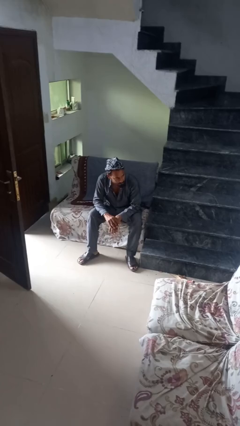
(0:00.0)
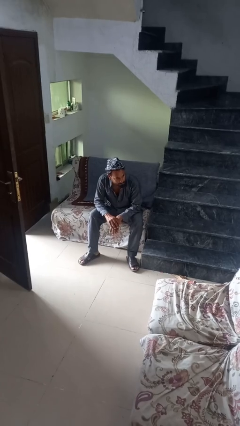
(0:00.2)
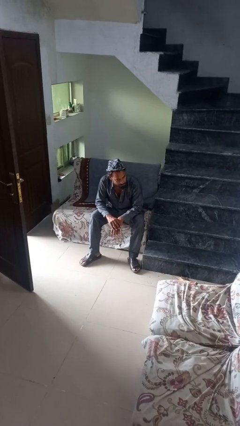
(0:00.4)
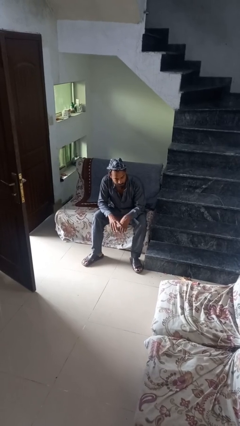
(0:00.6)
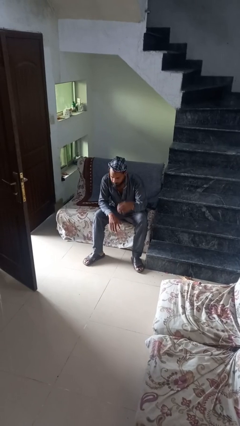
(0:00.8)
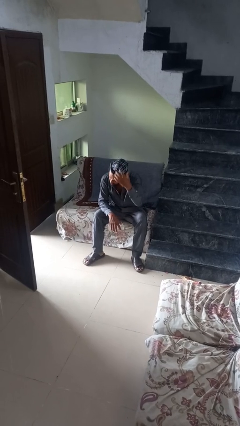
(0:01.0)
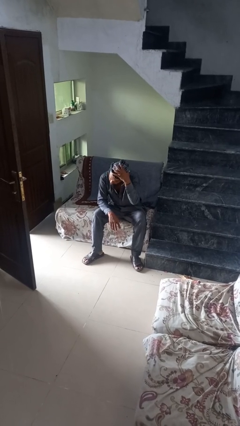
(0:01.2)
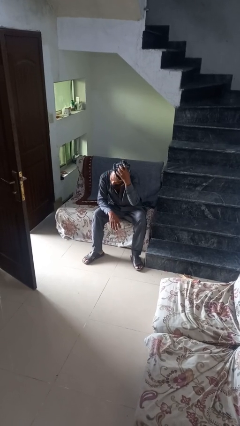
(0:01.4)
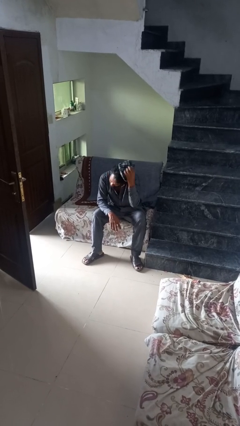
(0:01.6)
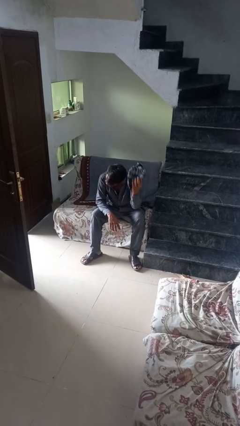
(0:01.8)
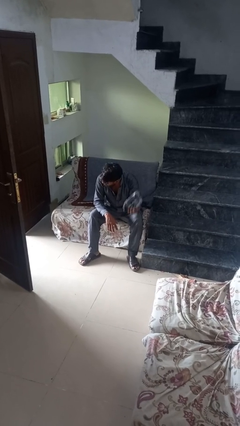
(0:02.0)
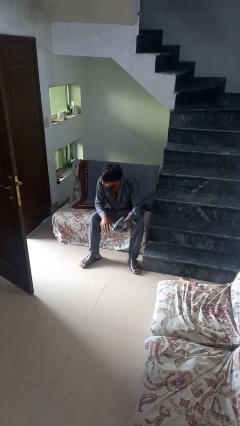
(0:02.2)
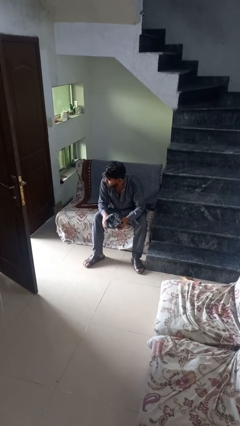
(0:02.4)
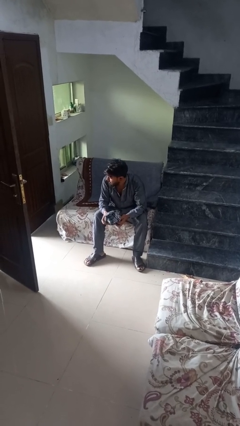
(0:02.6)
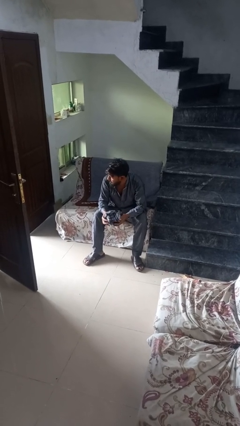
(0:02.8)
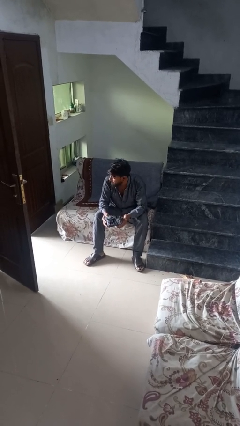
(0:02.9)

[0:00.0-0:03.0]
person takes off hat

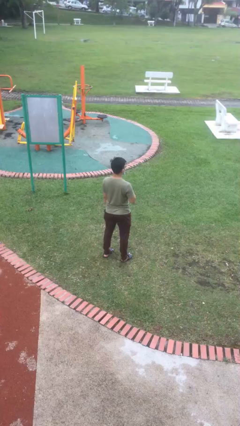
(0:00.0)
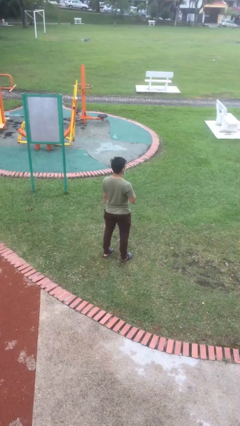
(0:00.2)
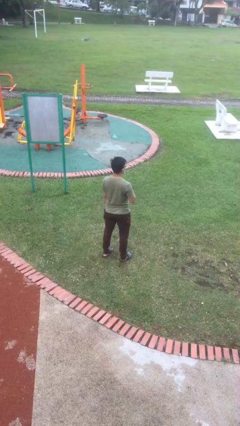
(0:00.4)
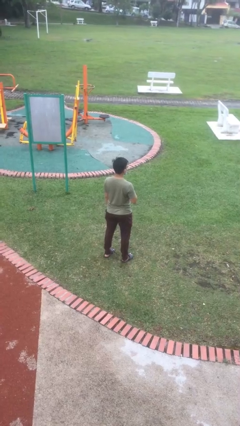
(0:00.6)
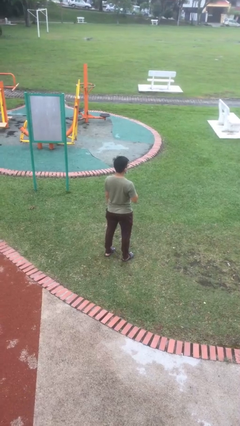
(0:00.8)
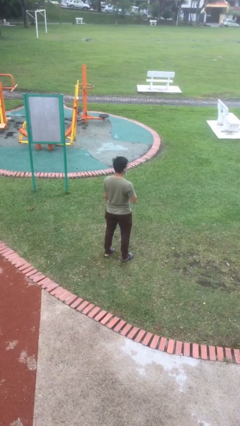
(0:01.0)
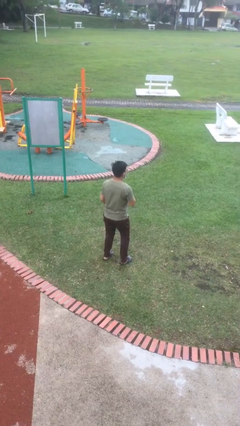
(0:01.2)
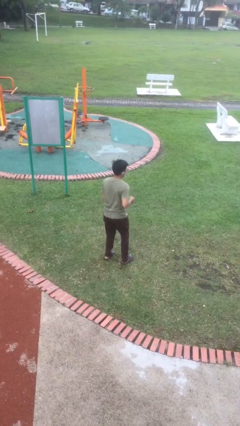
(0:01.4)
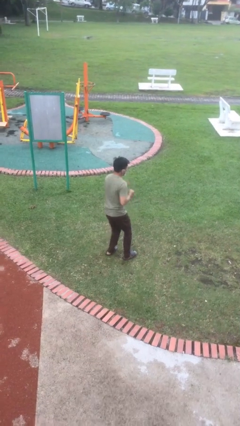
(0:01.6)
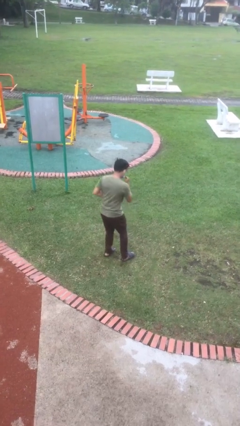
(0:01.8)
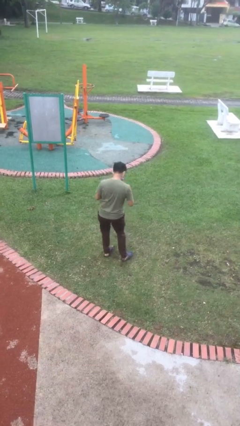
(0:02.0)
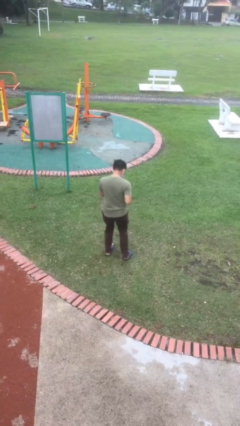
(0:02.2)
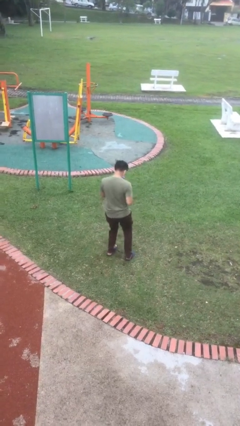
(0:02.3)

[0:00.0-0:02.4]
person dances in place

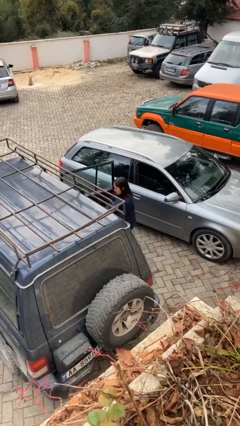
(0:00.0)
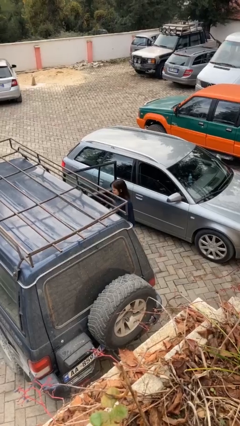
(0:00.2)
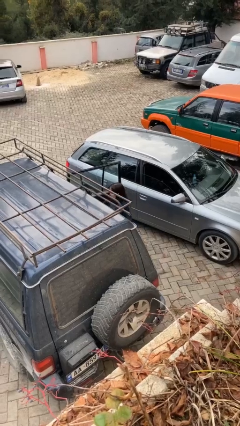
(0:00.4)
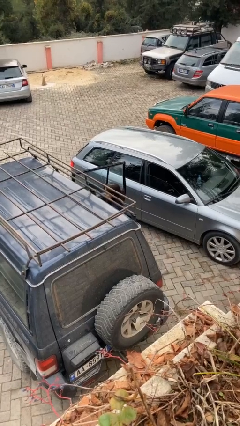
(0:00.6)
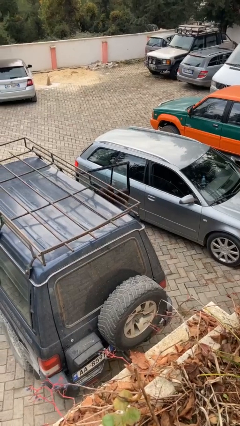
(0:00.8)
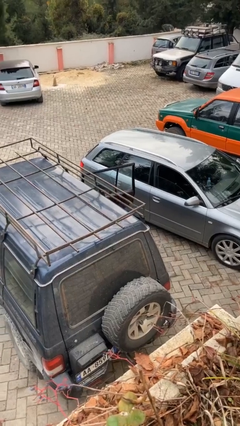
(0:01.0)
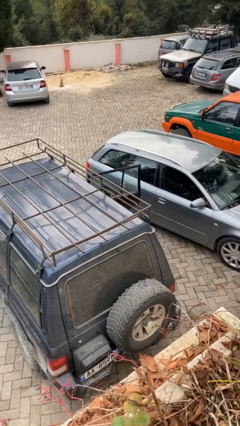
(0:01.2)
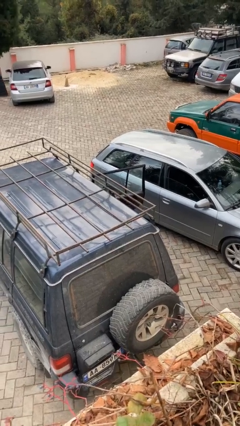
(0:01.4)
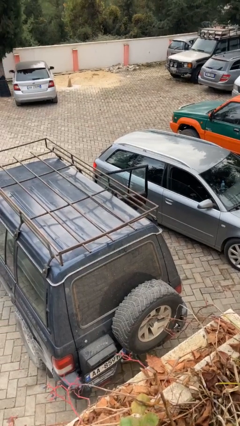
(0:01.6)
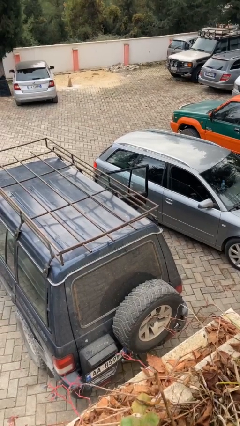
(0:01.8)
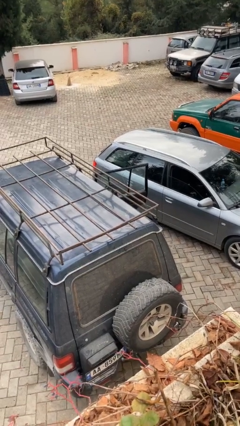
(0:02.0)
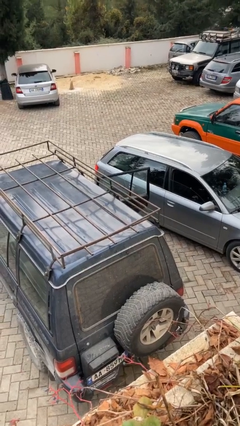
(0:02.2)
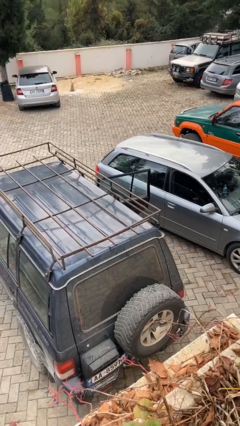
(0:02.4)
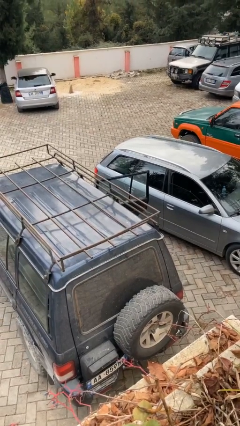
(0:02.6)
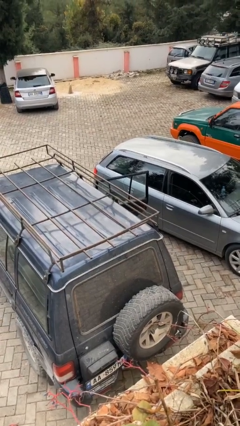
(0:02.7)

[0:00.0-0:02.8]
person enters car

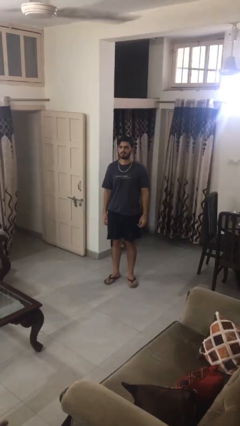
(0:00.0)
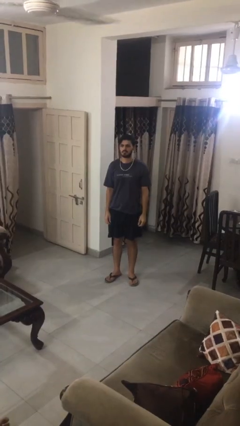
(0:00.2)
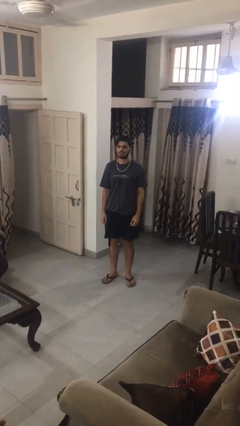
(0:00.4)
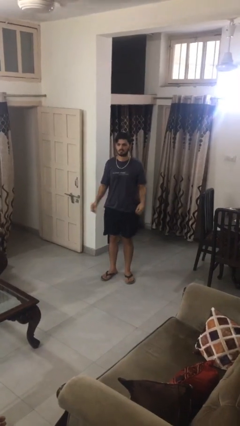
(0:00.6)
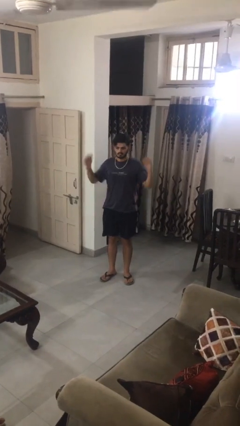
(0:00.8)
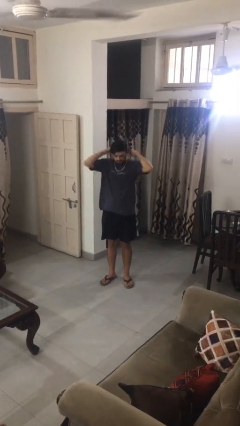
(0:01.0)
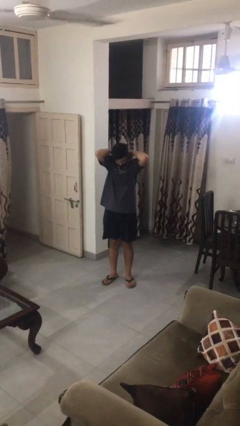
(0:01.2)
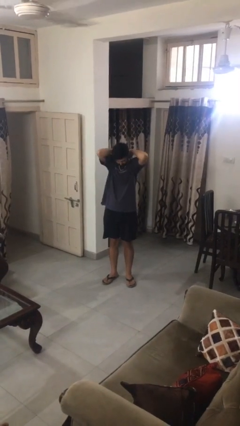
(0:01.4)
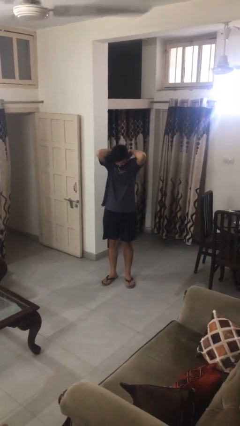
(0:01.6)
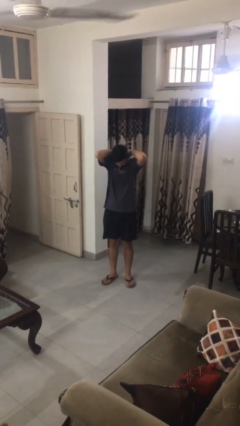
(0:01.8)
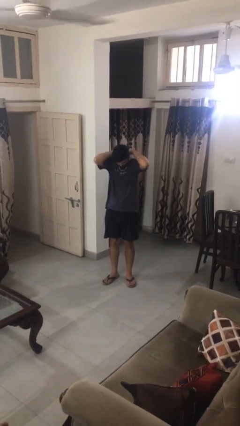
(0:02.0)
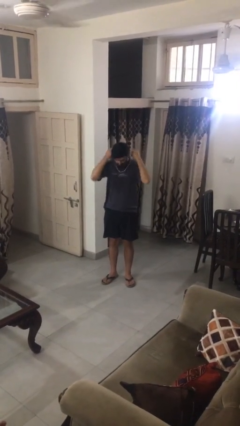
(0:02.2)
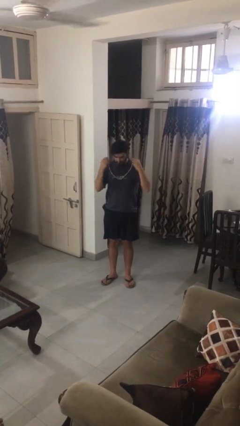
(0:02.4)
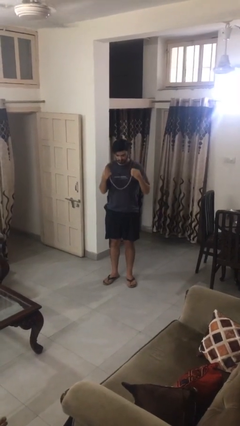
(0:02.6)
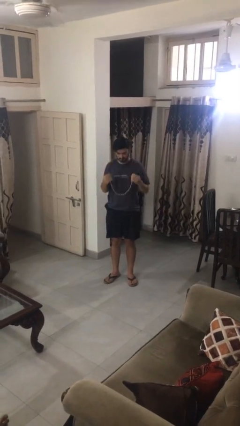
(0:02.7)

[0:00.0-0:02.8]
person takes off necklace

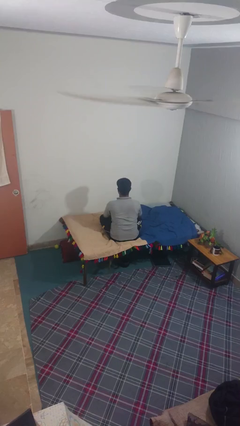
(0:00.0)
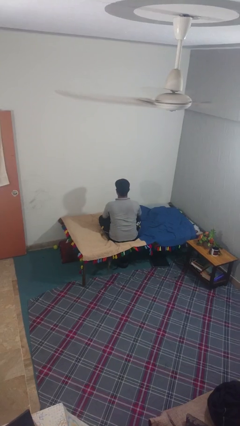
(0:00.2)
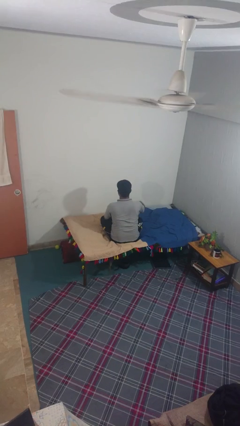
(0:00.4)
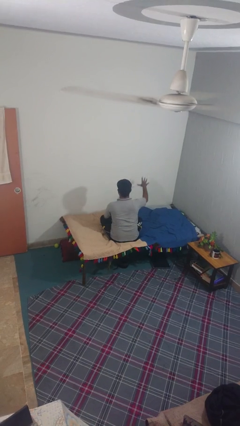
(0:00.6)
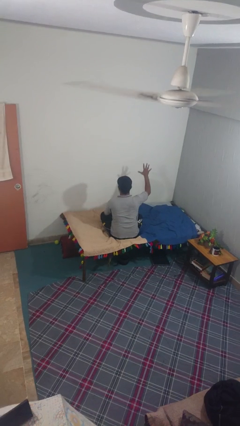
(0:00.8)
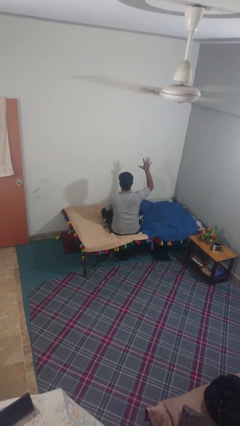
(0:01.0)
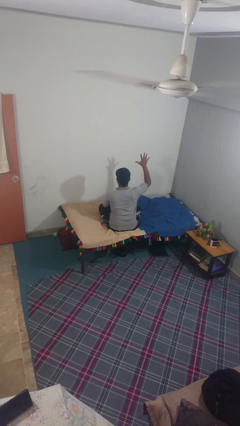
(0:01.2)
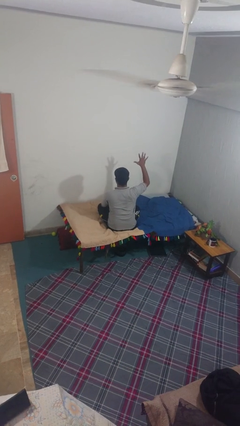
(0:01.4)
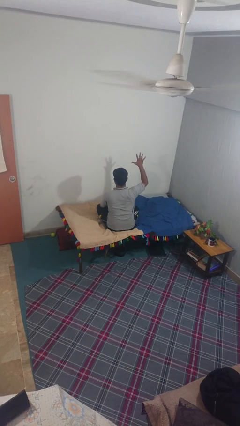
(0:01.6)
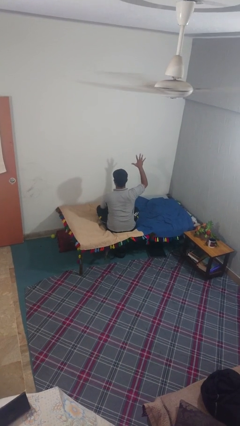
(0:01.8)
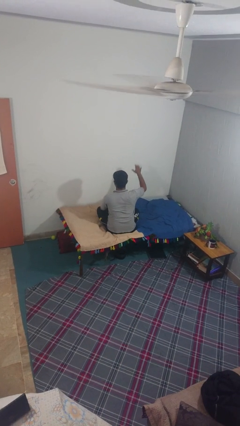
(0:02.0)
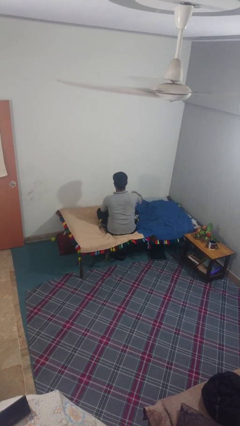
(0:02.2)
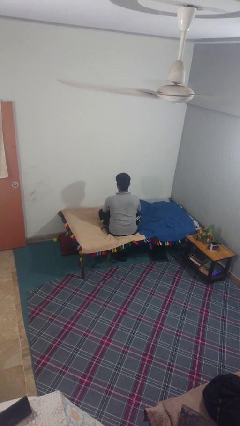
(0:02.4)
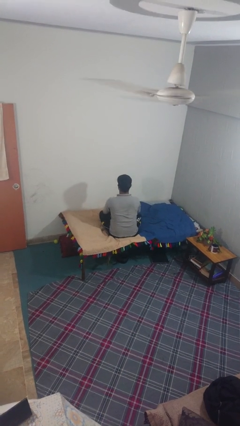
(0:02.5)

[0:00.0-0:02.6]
person gestures number five

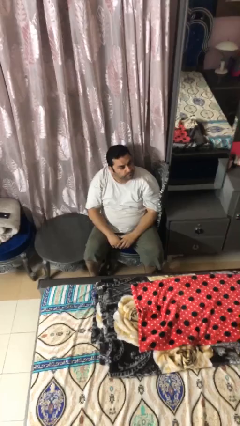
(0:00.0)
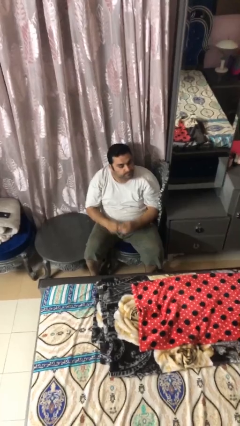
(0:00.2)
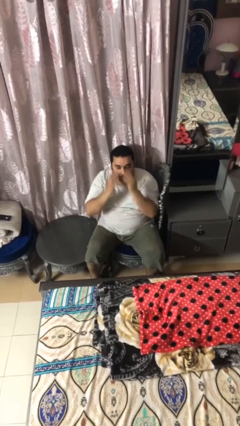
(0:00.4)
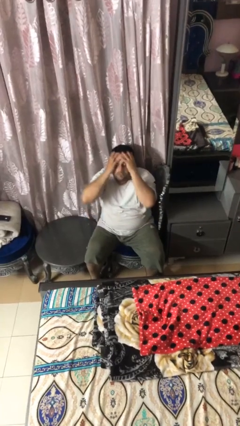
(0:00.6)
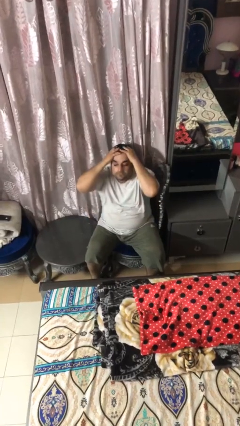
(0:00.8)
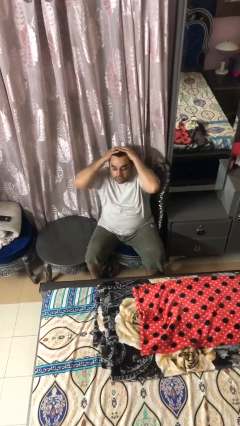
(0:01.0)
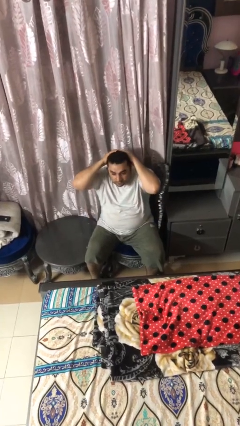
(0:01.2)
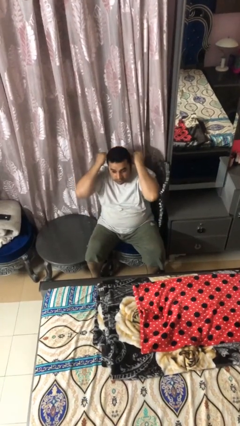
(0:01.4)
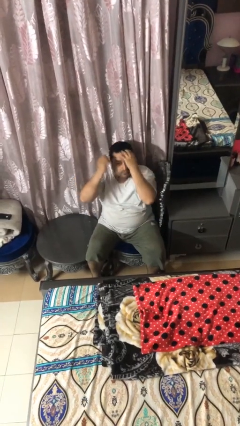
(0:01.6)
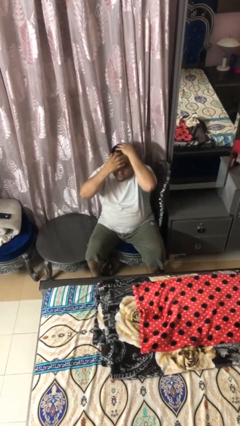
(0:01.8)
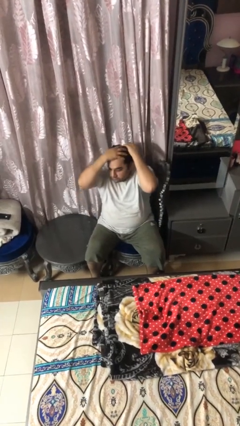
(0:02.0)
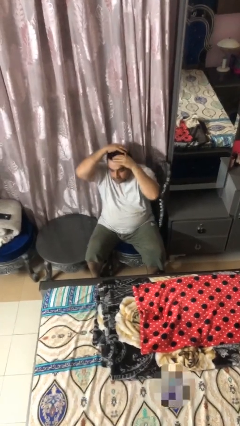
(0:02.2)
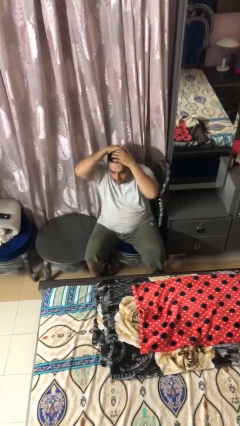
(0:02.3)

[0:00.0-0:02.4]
person strokes hair

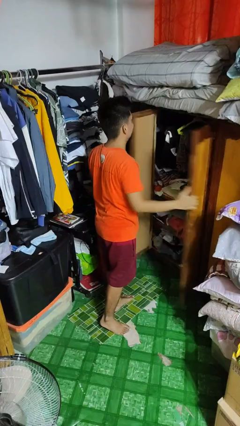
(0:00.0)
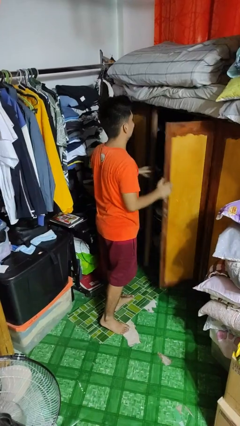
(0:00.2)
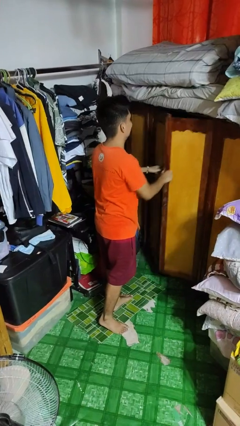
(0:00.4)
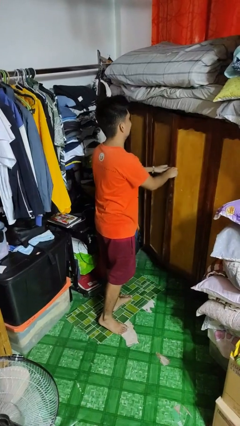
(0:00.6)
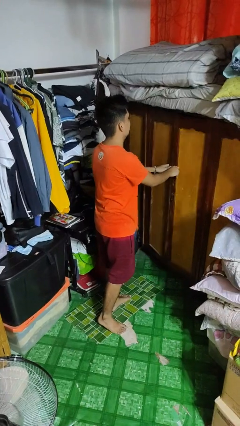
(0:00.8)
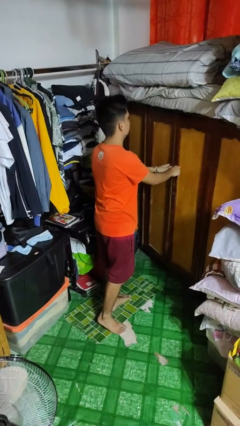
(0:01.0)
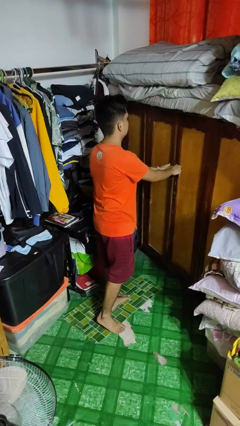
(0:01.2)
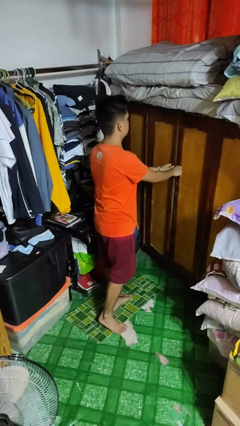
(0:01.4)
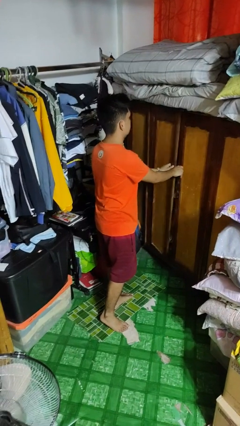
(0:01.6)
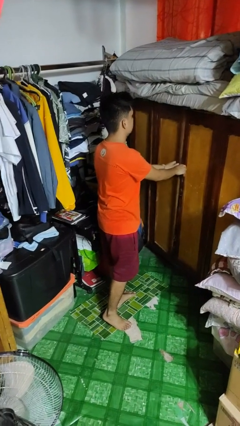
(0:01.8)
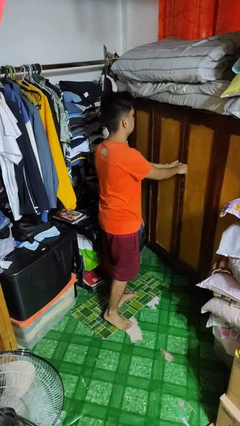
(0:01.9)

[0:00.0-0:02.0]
person closes closet door
